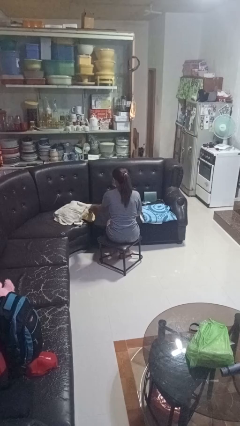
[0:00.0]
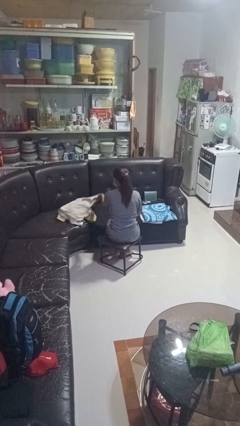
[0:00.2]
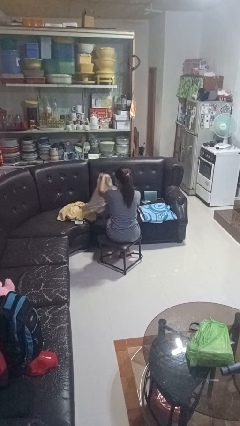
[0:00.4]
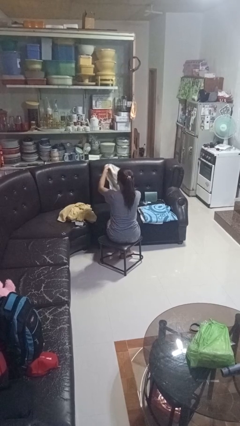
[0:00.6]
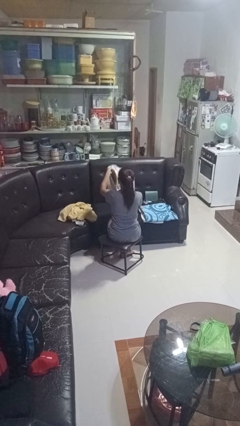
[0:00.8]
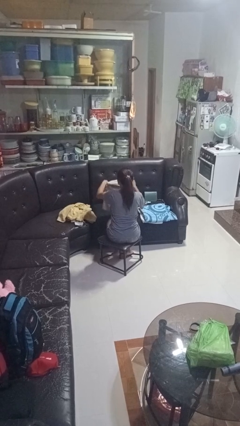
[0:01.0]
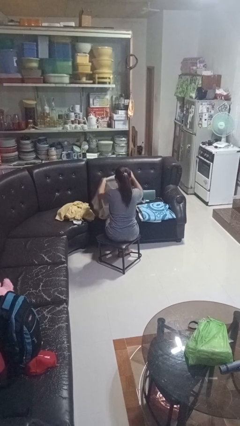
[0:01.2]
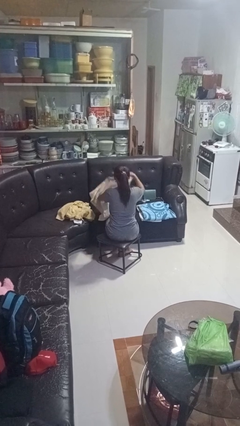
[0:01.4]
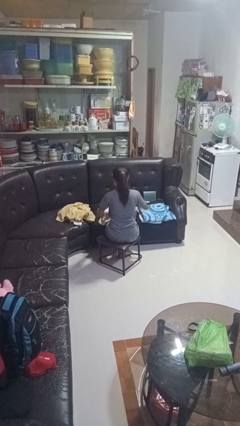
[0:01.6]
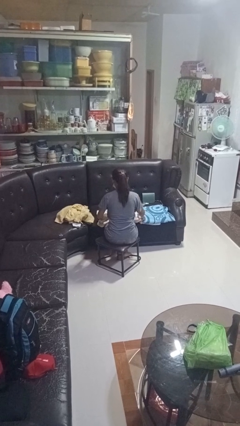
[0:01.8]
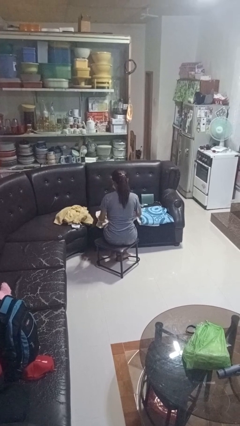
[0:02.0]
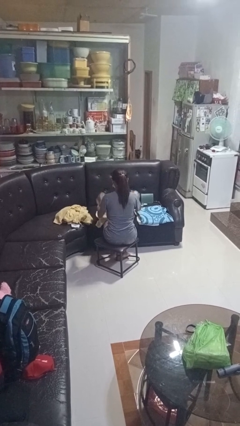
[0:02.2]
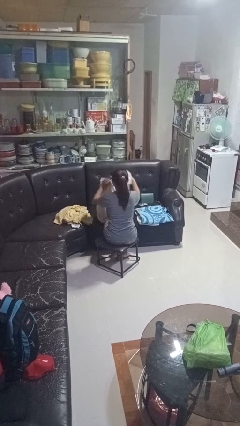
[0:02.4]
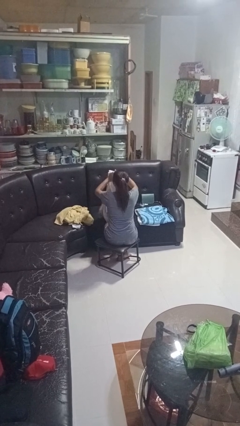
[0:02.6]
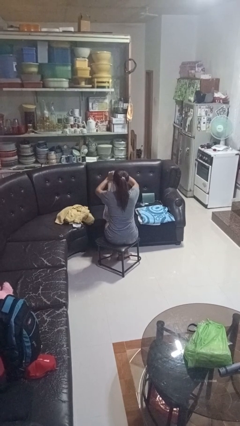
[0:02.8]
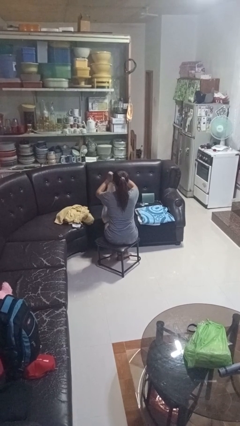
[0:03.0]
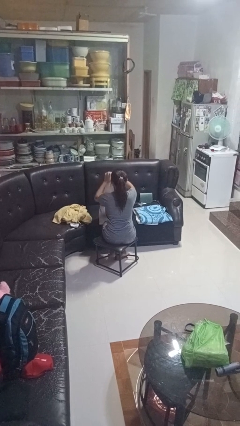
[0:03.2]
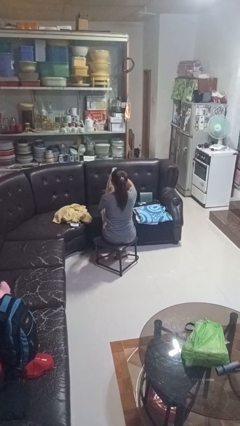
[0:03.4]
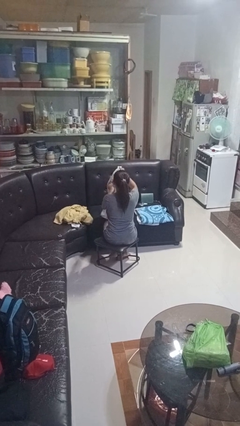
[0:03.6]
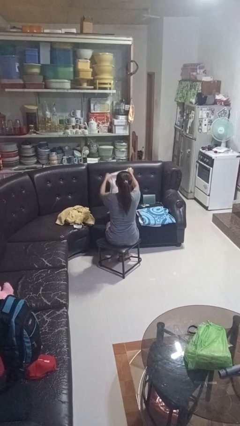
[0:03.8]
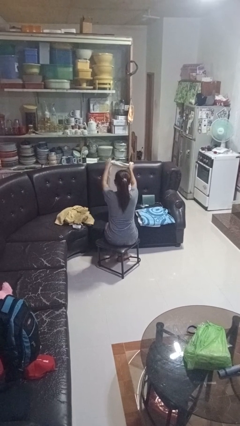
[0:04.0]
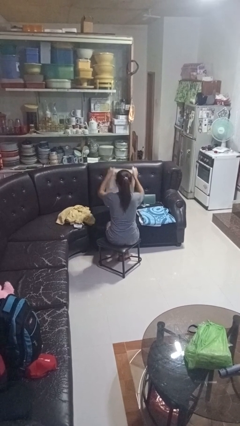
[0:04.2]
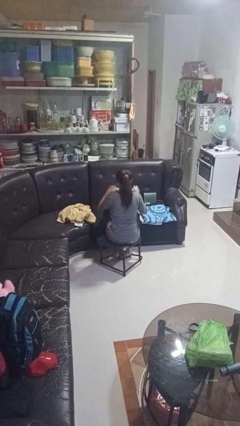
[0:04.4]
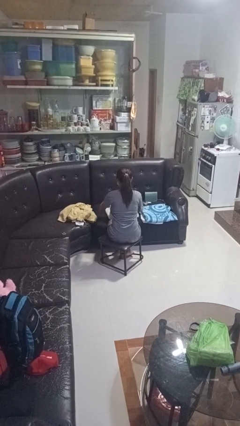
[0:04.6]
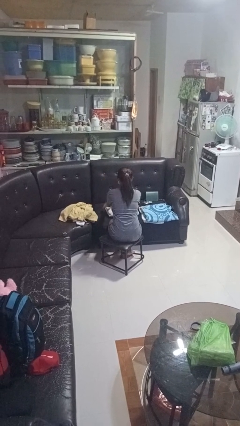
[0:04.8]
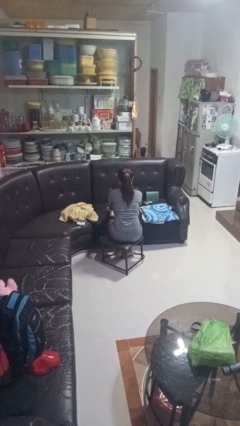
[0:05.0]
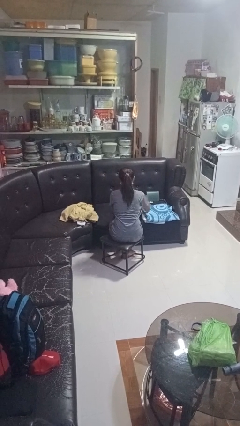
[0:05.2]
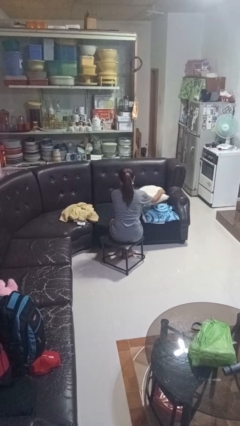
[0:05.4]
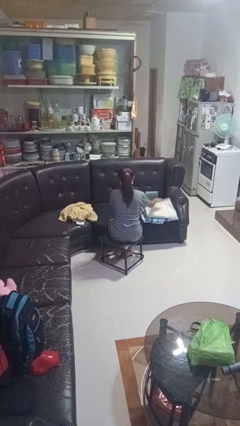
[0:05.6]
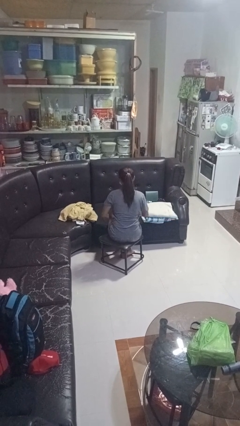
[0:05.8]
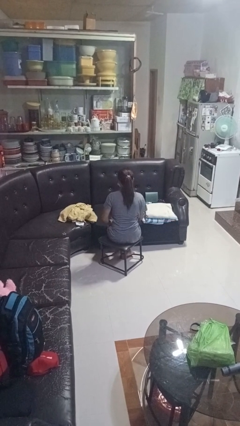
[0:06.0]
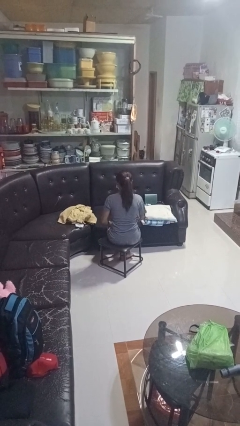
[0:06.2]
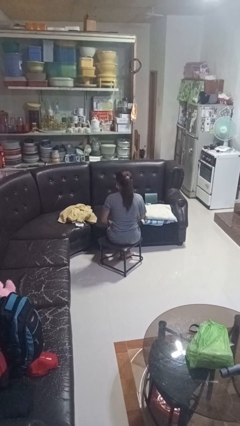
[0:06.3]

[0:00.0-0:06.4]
person folds towel

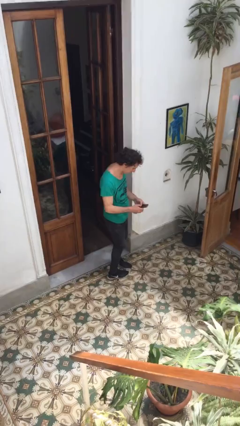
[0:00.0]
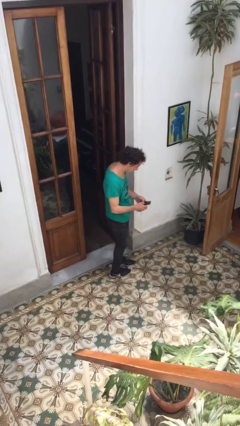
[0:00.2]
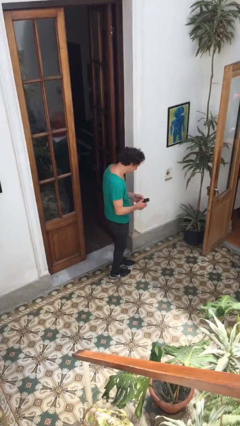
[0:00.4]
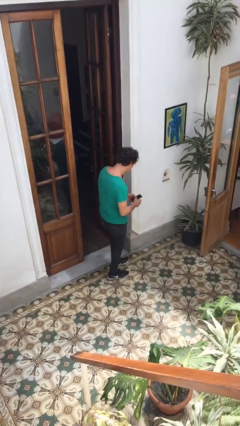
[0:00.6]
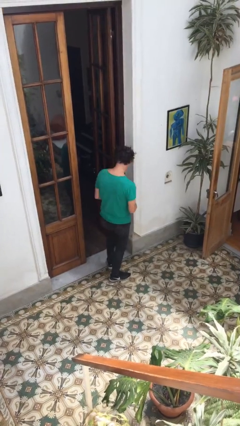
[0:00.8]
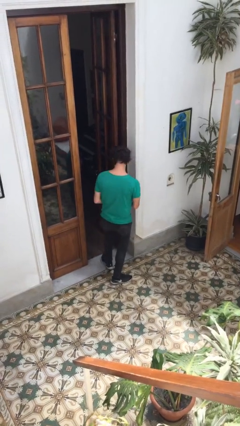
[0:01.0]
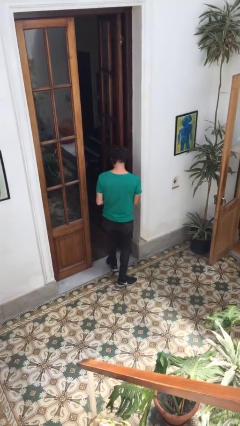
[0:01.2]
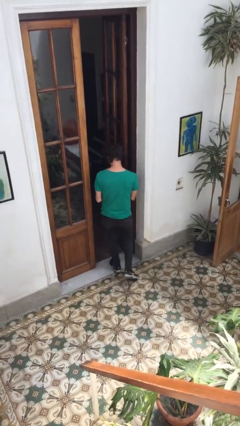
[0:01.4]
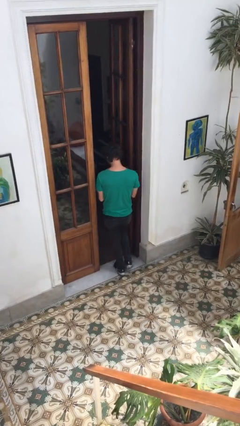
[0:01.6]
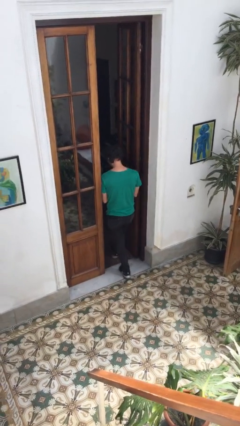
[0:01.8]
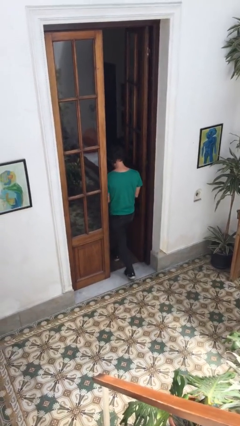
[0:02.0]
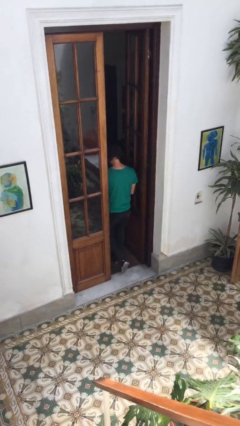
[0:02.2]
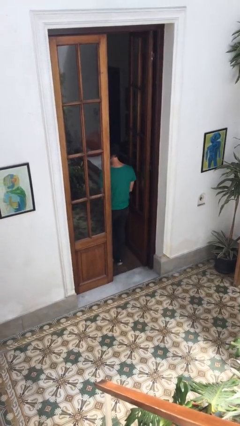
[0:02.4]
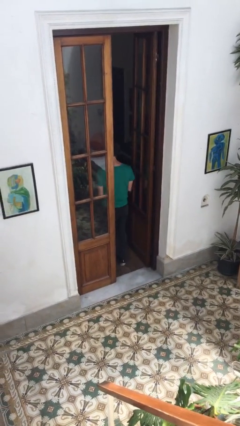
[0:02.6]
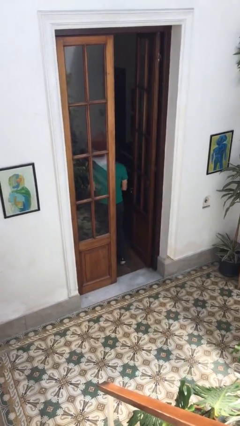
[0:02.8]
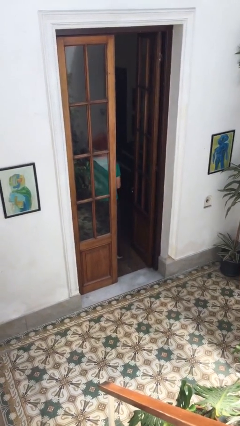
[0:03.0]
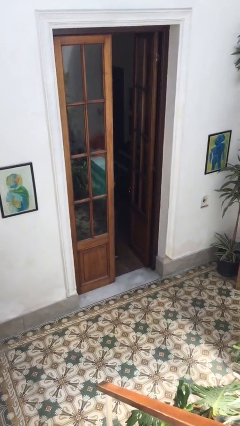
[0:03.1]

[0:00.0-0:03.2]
person exits scene through structure

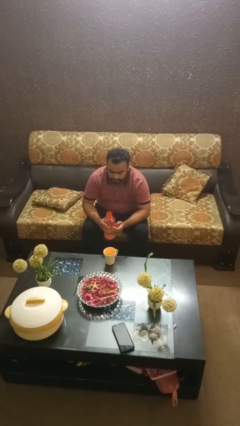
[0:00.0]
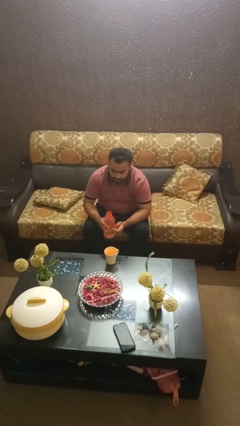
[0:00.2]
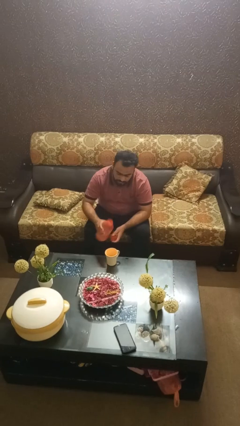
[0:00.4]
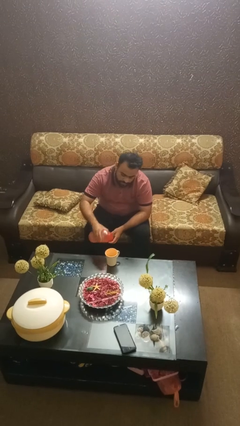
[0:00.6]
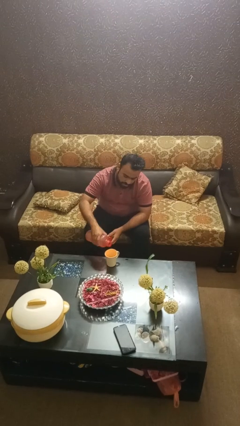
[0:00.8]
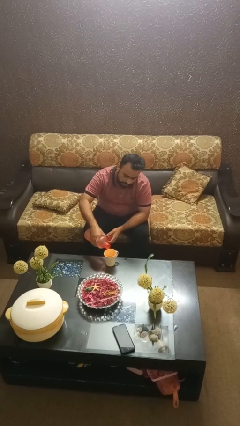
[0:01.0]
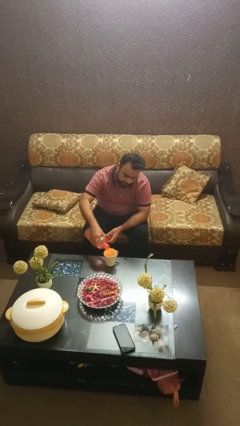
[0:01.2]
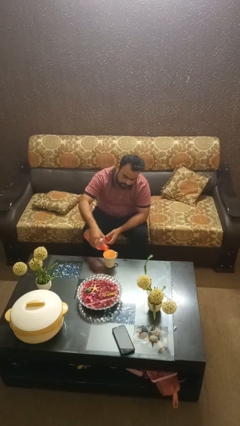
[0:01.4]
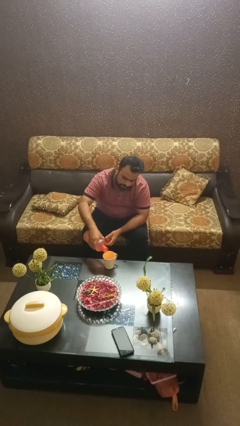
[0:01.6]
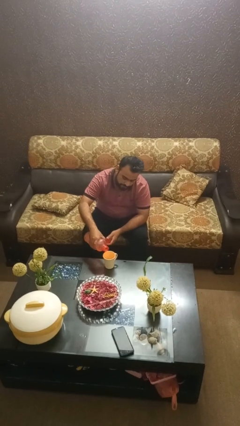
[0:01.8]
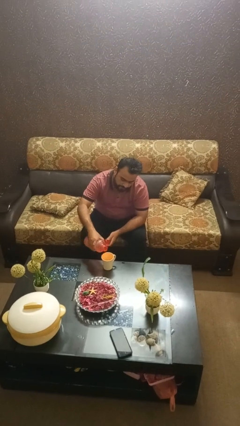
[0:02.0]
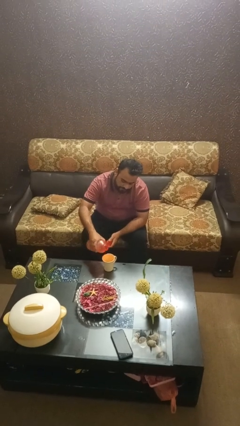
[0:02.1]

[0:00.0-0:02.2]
person pours liquid into cup

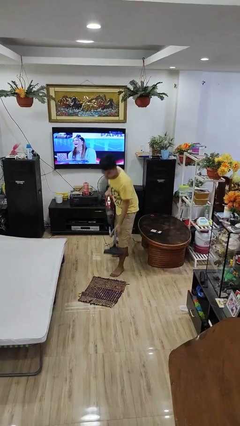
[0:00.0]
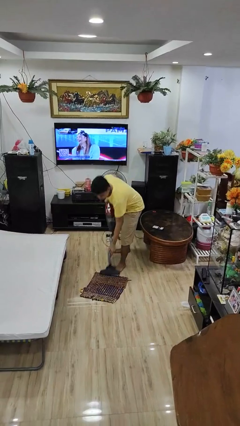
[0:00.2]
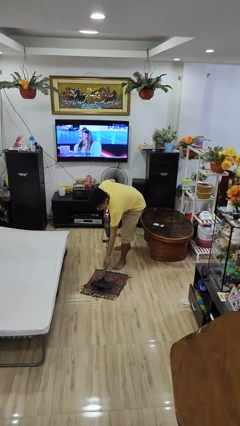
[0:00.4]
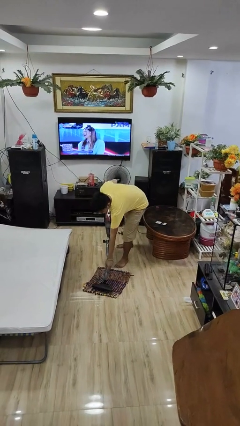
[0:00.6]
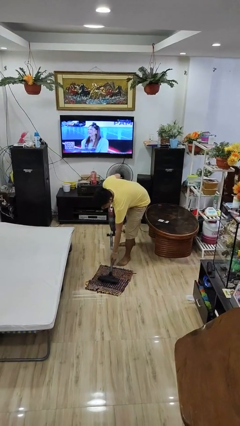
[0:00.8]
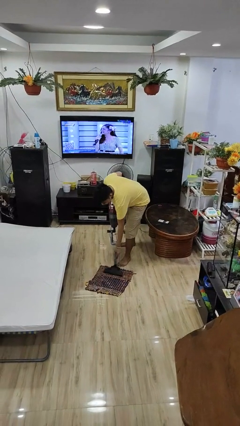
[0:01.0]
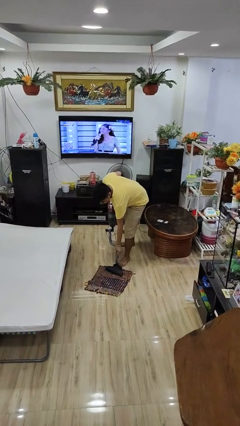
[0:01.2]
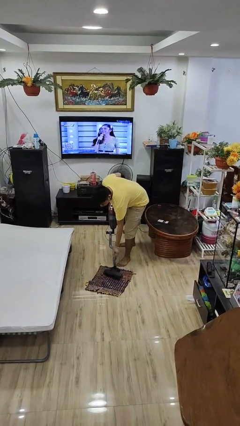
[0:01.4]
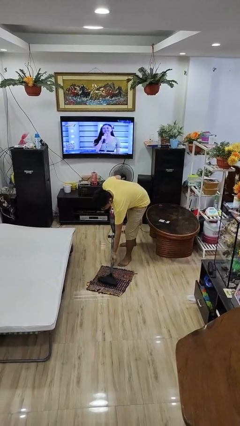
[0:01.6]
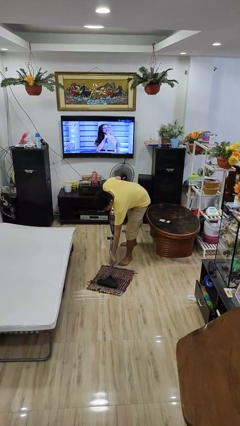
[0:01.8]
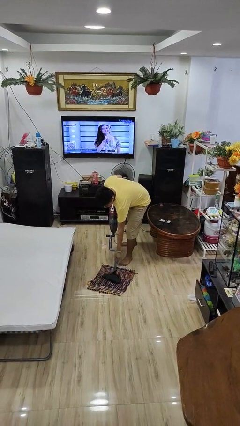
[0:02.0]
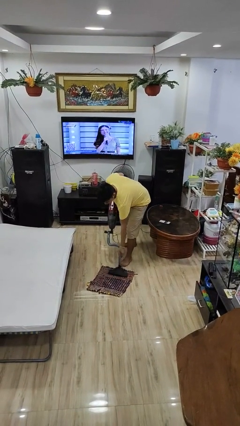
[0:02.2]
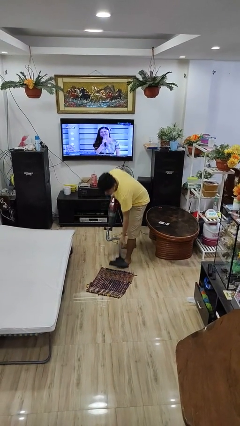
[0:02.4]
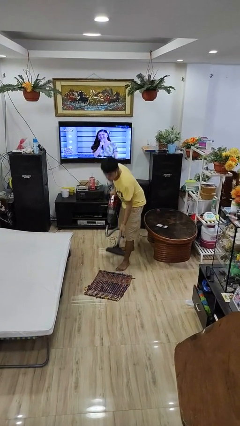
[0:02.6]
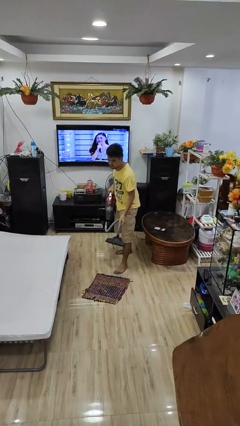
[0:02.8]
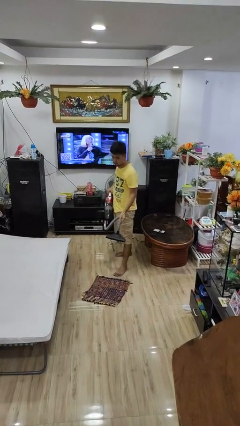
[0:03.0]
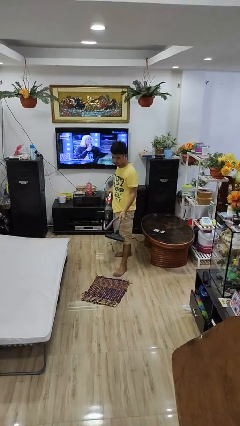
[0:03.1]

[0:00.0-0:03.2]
person vacuums carpet

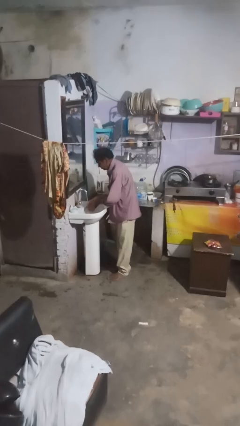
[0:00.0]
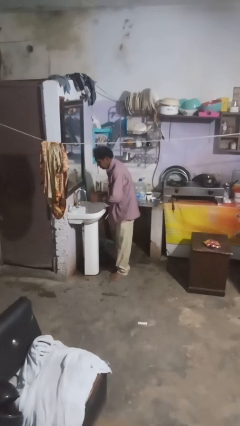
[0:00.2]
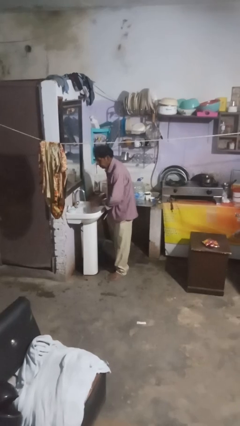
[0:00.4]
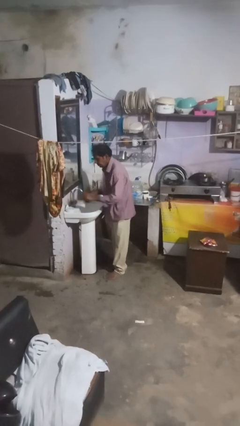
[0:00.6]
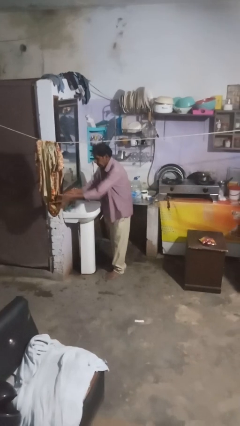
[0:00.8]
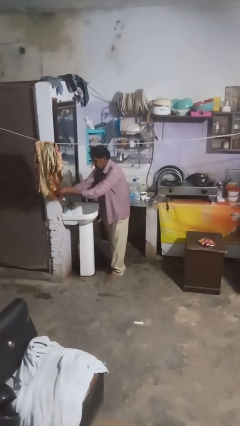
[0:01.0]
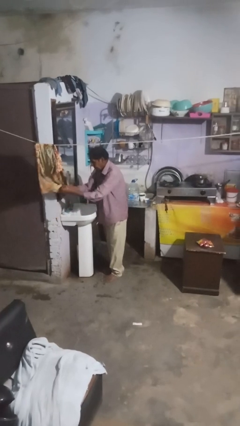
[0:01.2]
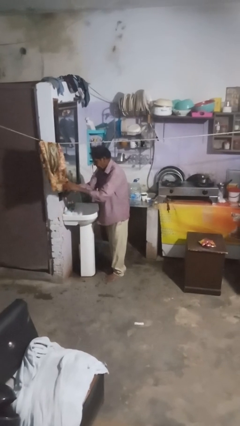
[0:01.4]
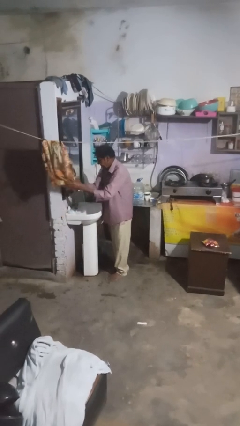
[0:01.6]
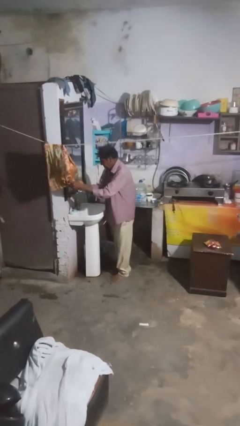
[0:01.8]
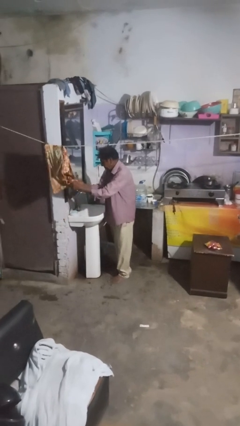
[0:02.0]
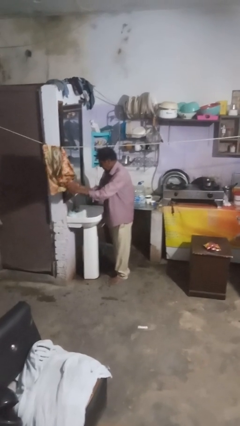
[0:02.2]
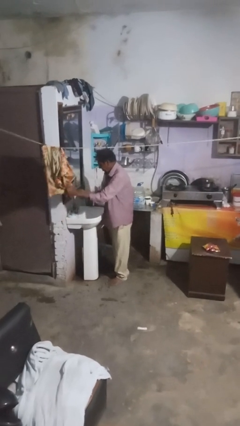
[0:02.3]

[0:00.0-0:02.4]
person dries hands with towel

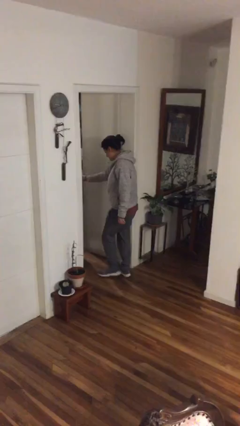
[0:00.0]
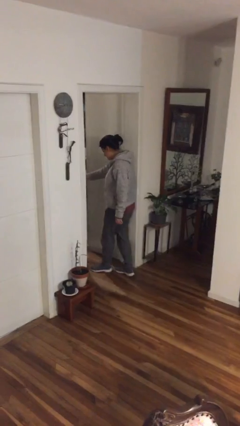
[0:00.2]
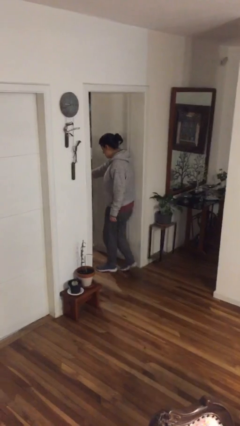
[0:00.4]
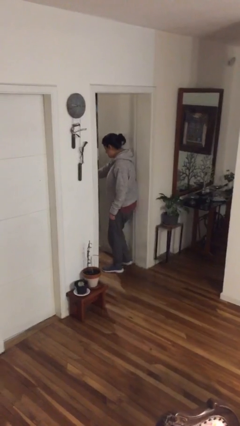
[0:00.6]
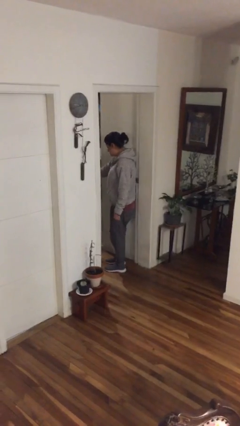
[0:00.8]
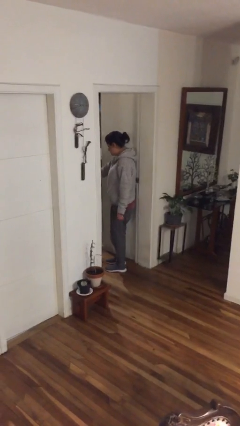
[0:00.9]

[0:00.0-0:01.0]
person opens facility door
